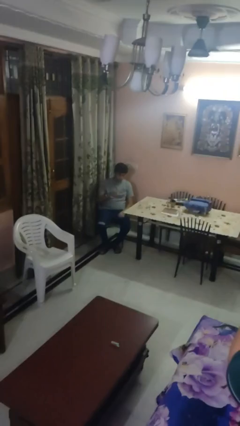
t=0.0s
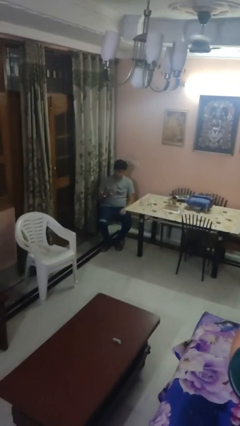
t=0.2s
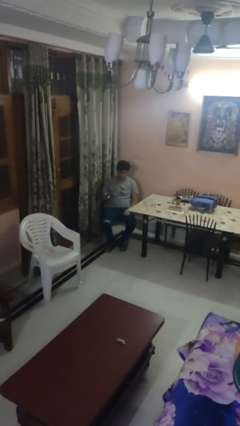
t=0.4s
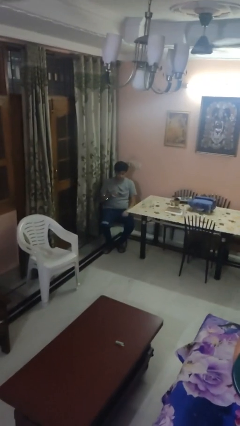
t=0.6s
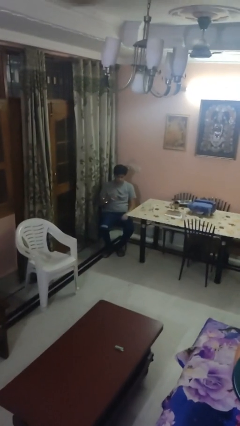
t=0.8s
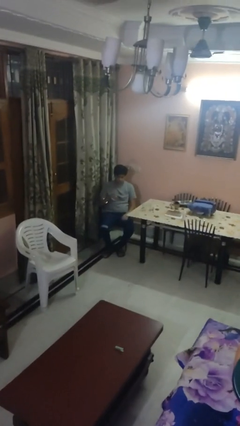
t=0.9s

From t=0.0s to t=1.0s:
person picks up object from table

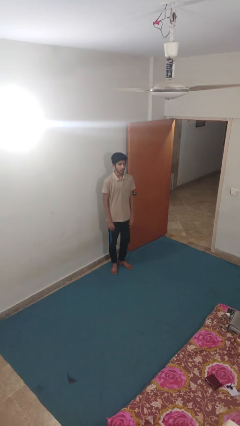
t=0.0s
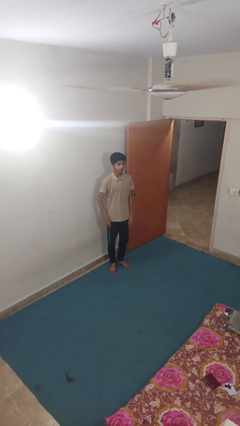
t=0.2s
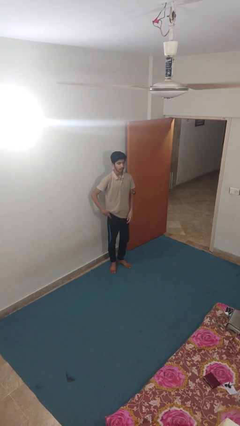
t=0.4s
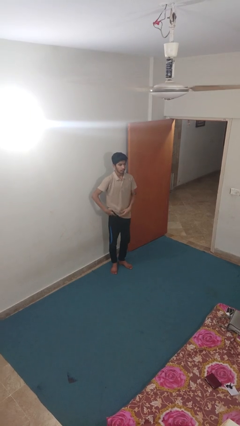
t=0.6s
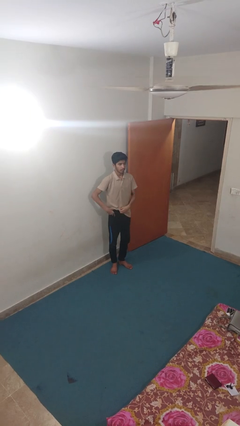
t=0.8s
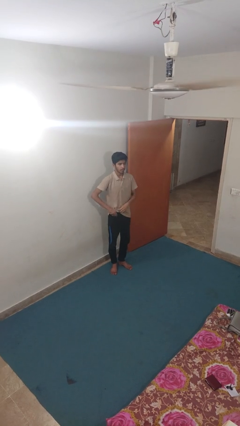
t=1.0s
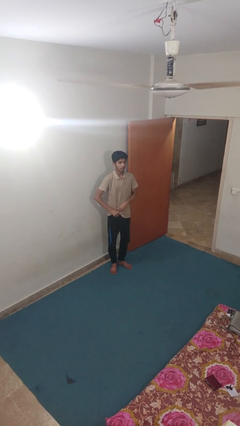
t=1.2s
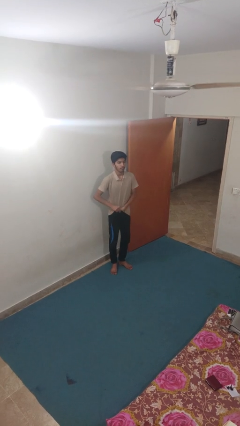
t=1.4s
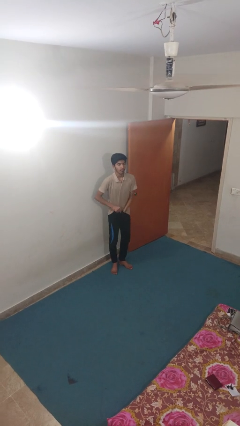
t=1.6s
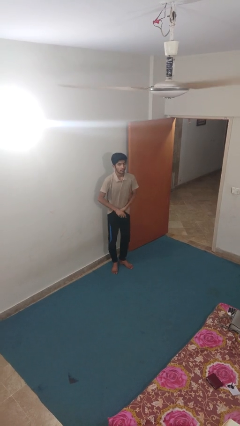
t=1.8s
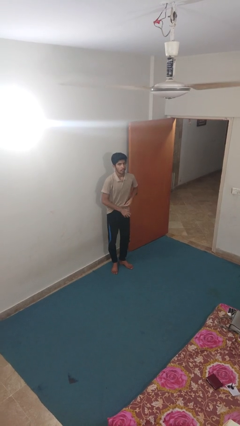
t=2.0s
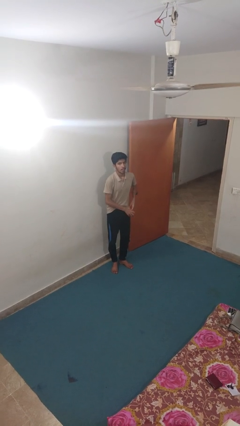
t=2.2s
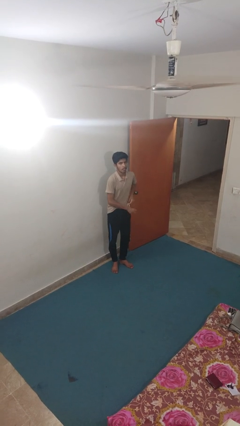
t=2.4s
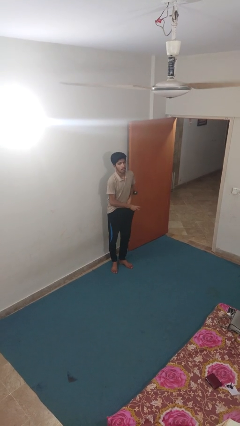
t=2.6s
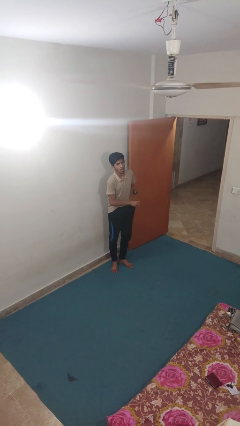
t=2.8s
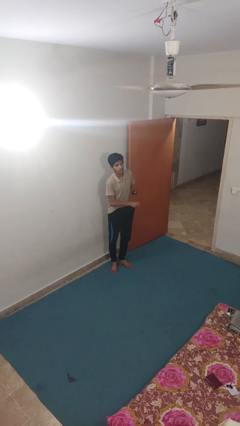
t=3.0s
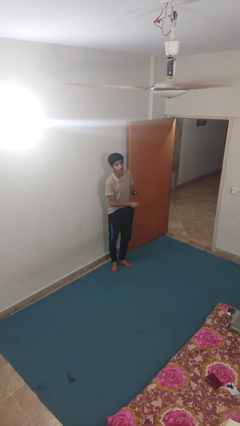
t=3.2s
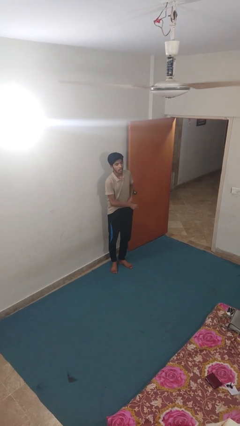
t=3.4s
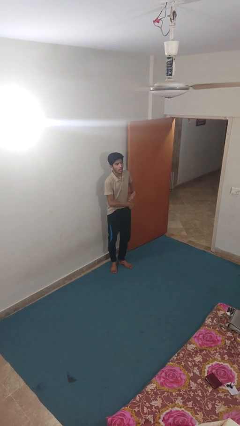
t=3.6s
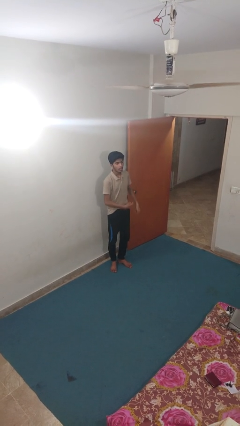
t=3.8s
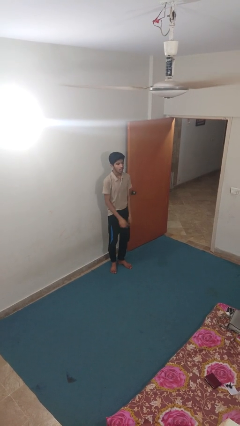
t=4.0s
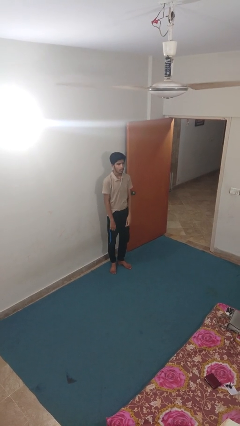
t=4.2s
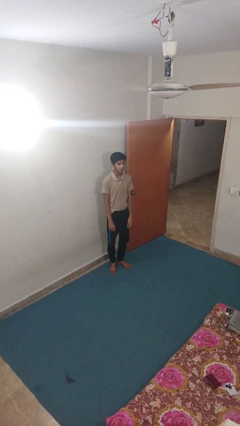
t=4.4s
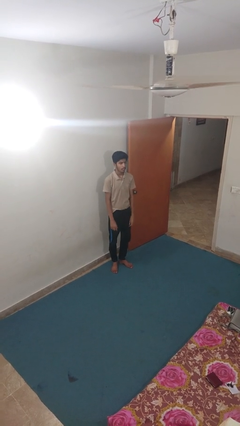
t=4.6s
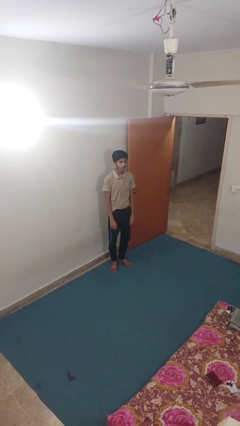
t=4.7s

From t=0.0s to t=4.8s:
person tucks in shirt

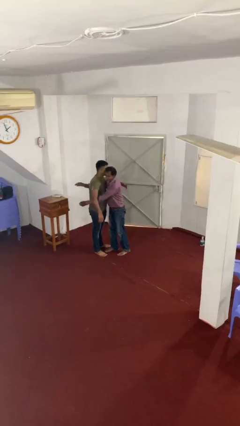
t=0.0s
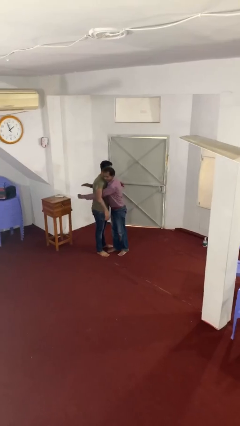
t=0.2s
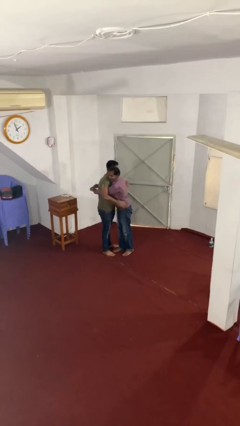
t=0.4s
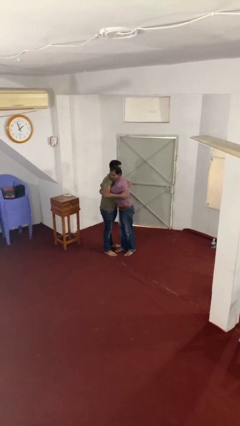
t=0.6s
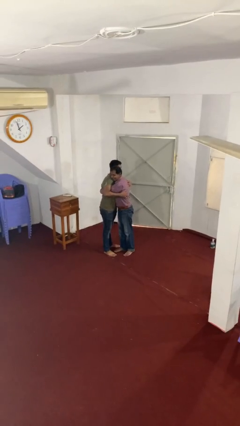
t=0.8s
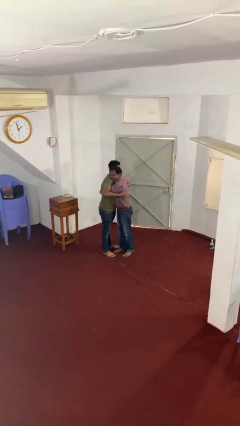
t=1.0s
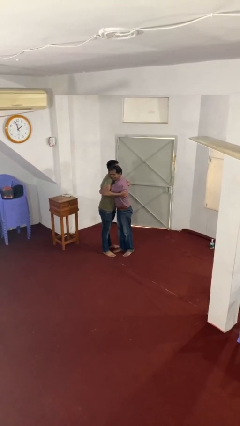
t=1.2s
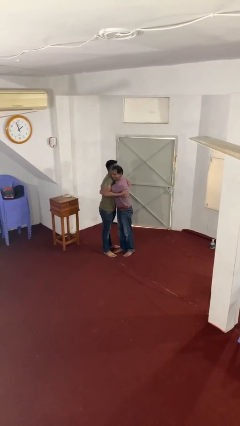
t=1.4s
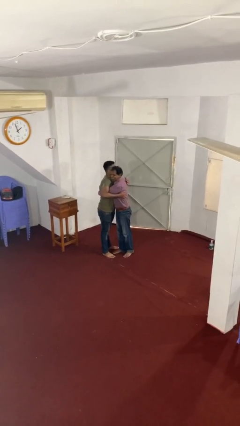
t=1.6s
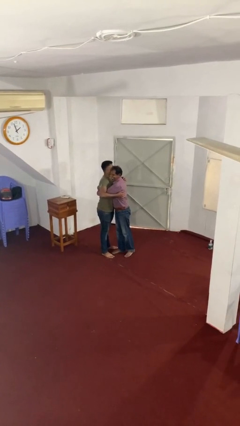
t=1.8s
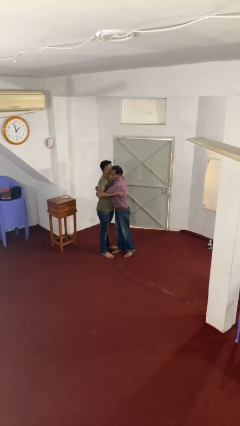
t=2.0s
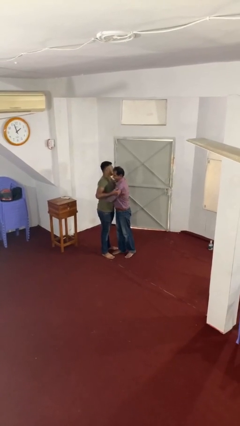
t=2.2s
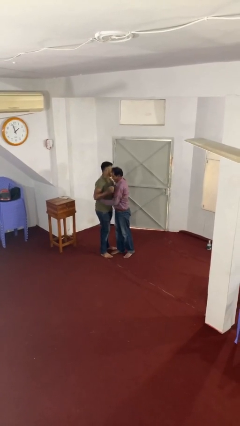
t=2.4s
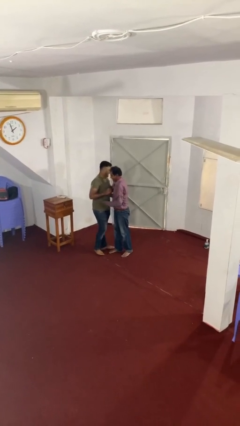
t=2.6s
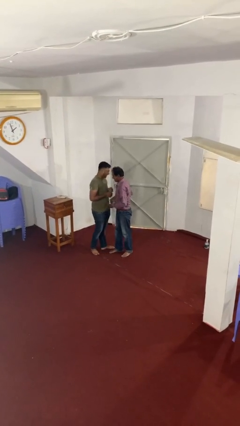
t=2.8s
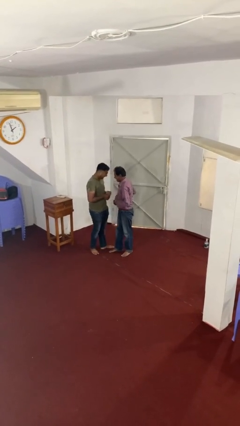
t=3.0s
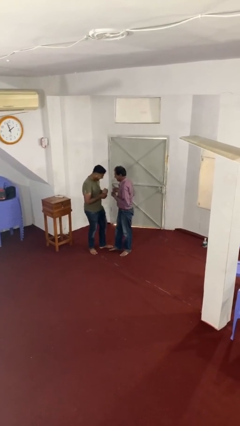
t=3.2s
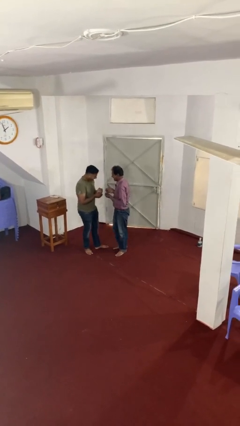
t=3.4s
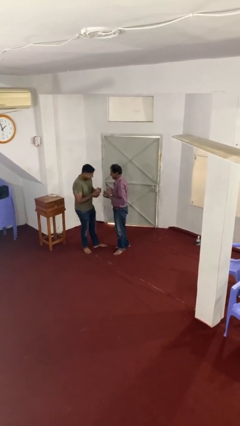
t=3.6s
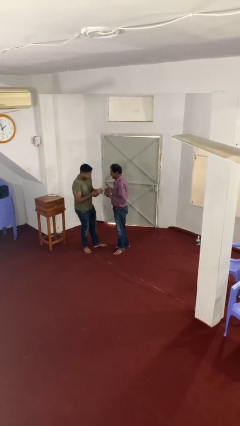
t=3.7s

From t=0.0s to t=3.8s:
person embraces person

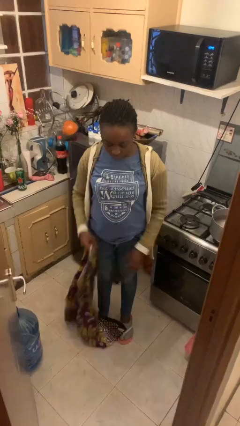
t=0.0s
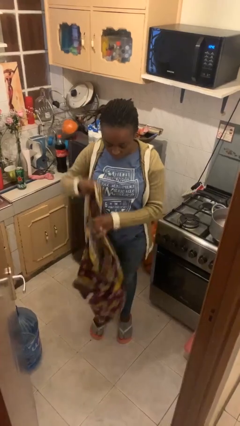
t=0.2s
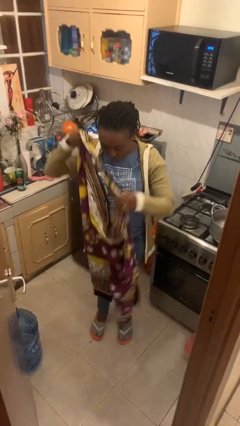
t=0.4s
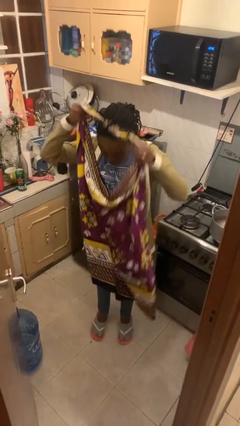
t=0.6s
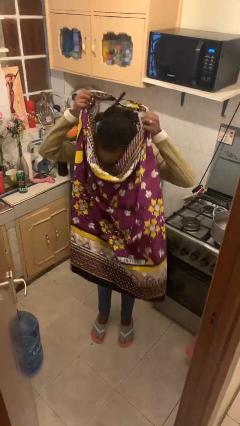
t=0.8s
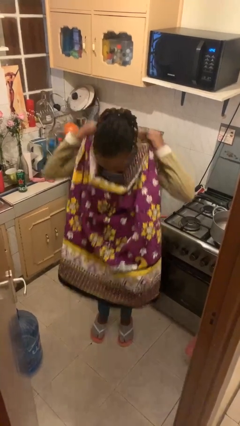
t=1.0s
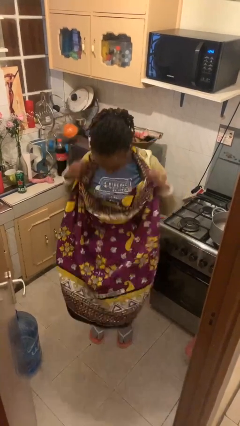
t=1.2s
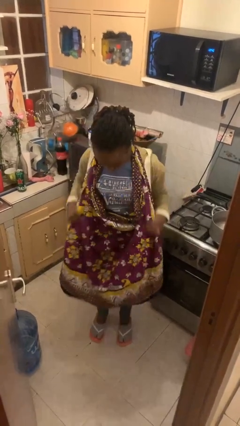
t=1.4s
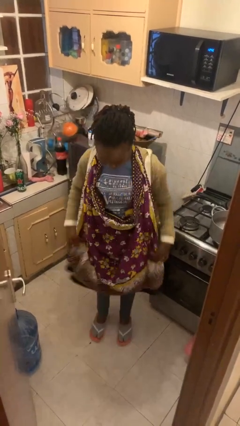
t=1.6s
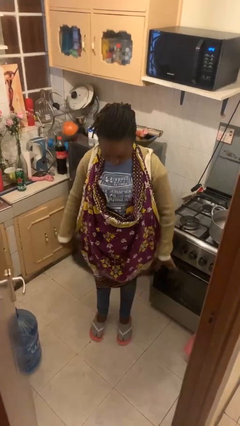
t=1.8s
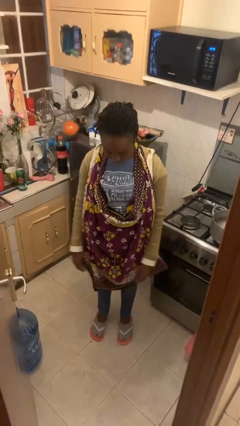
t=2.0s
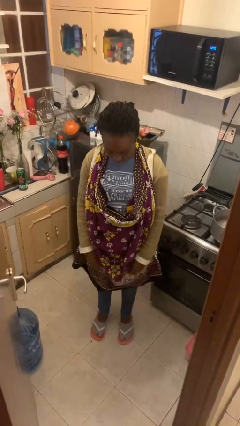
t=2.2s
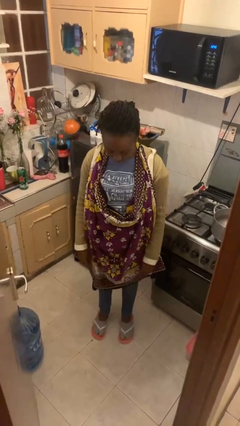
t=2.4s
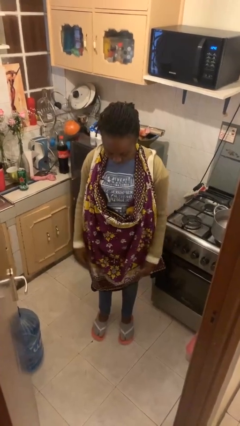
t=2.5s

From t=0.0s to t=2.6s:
person puts on apron

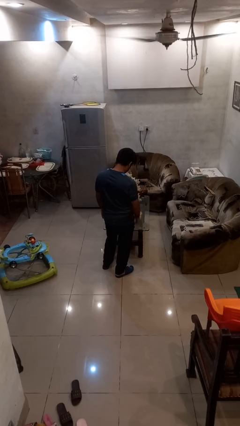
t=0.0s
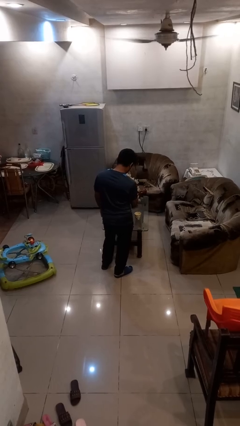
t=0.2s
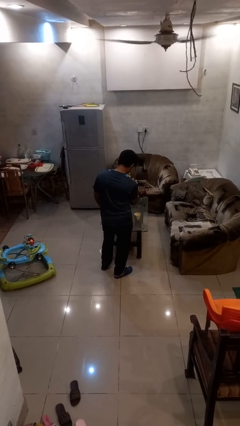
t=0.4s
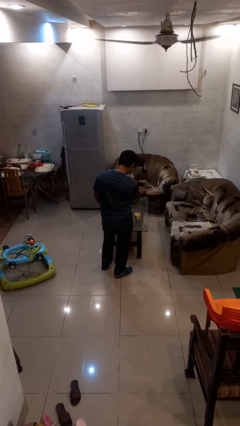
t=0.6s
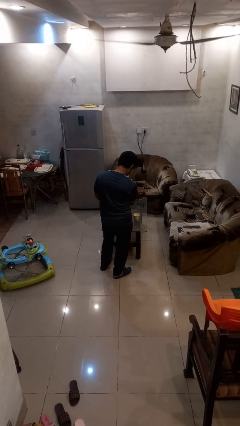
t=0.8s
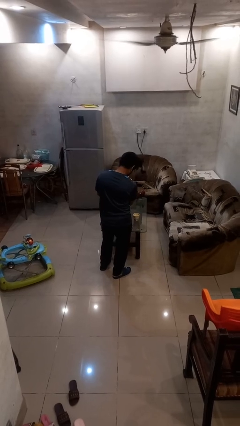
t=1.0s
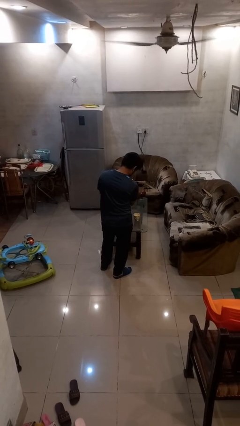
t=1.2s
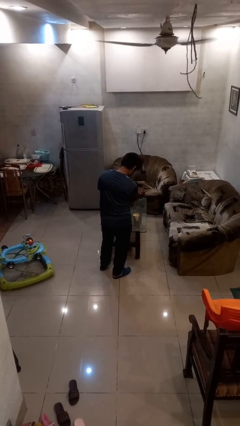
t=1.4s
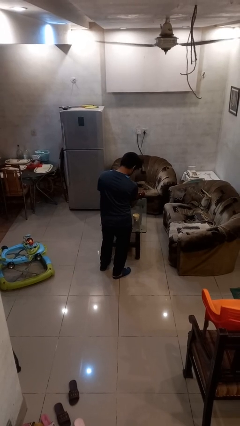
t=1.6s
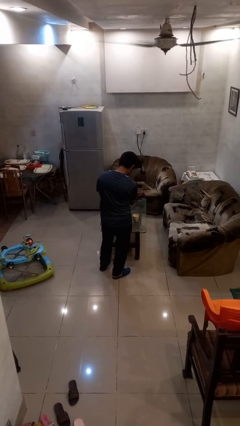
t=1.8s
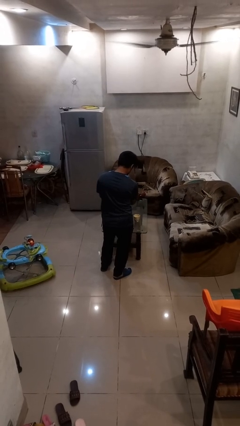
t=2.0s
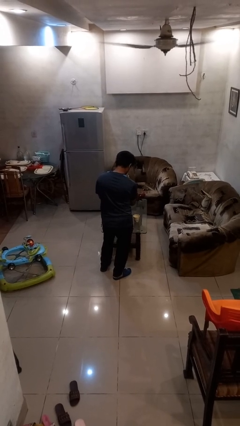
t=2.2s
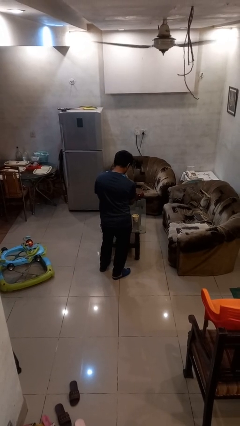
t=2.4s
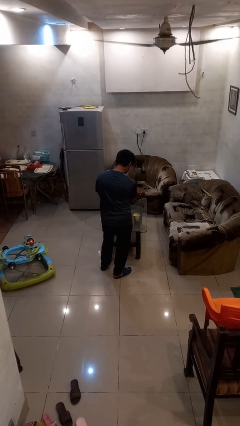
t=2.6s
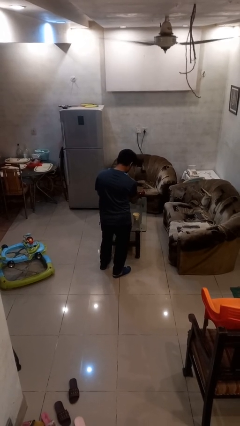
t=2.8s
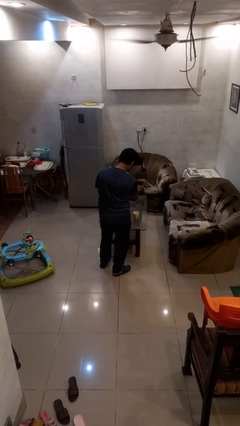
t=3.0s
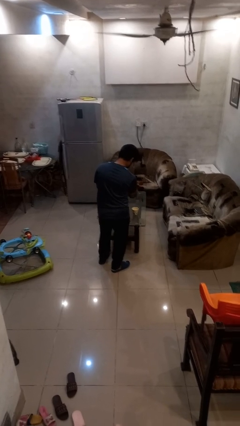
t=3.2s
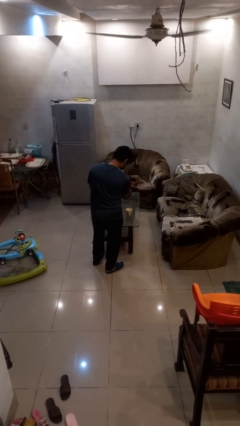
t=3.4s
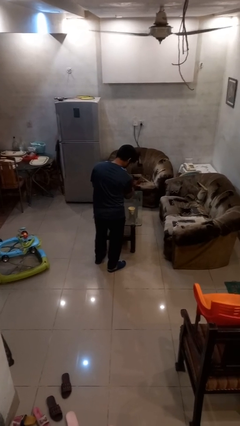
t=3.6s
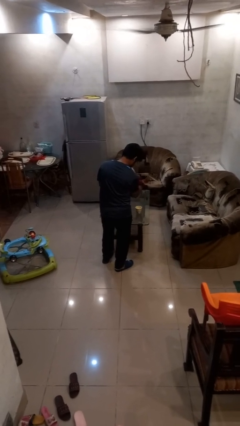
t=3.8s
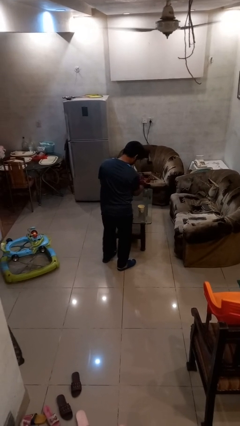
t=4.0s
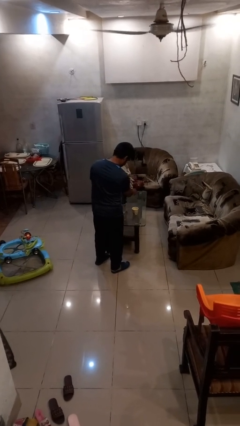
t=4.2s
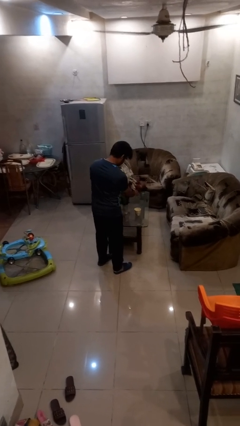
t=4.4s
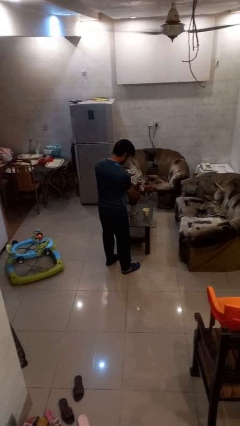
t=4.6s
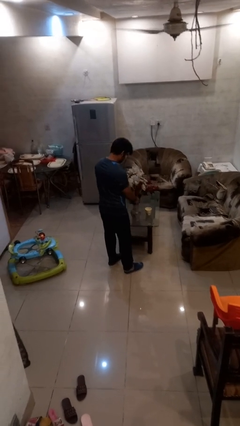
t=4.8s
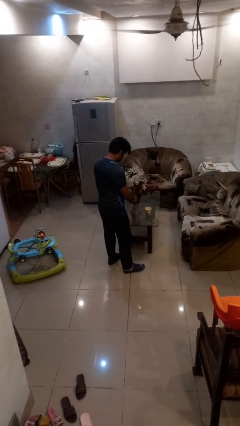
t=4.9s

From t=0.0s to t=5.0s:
person arranges flowers in vase

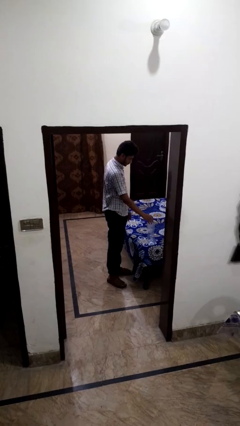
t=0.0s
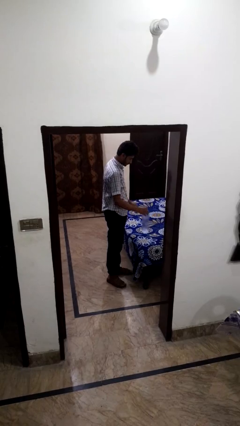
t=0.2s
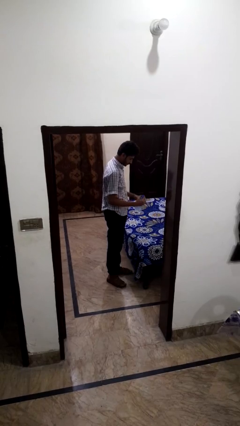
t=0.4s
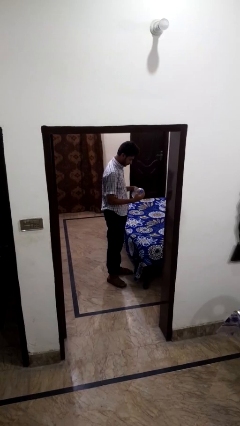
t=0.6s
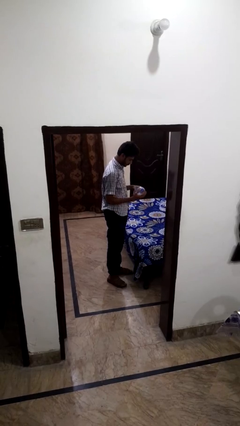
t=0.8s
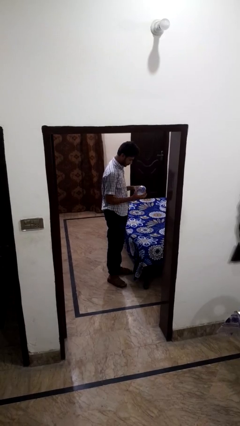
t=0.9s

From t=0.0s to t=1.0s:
person picks up object from bed
